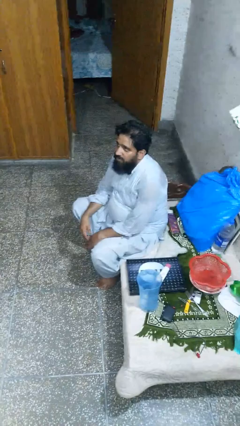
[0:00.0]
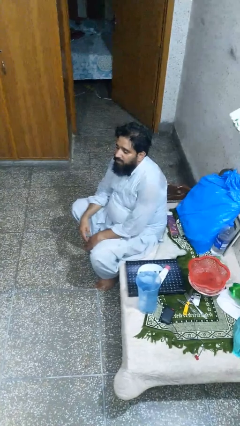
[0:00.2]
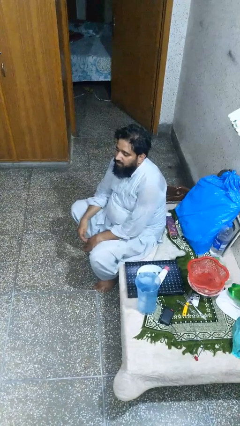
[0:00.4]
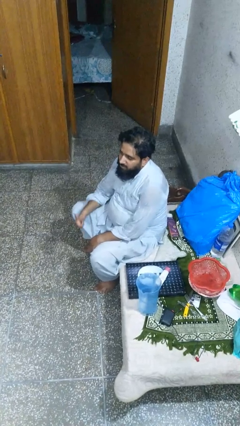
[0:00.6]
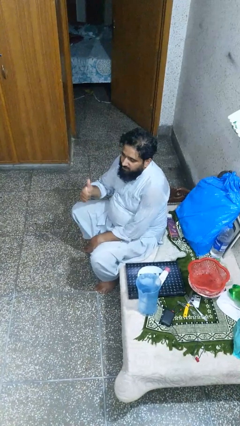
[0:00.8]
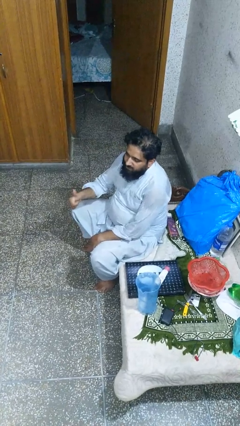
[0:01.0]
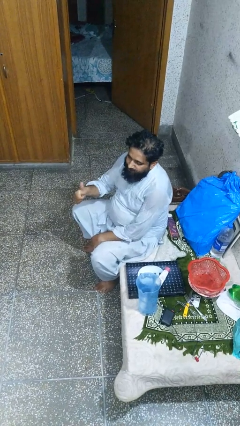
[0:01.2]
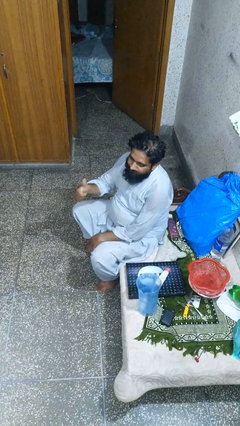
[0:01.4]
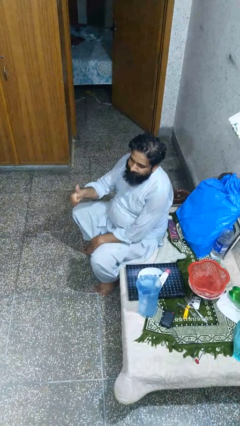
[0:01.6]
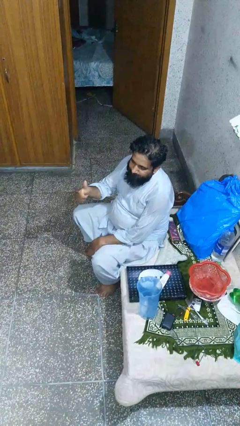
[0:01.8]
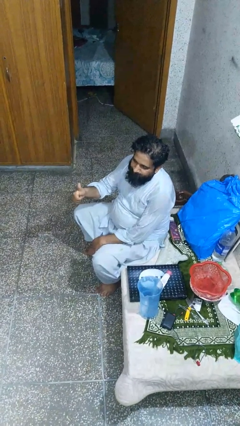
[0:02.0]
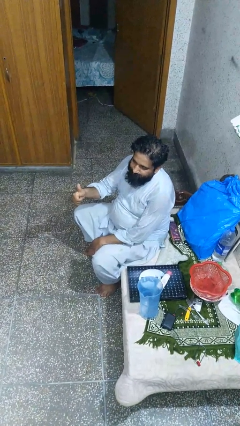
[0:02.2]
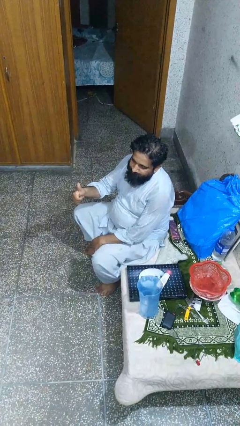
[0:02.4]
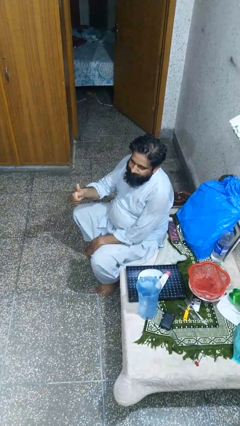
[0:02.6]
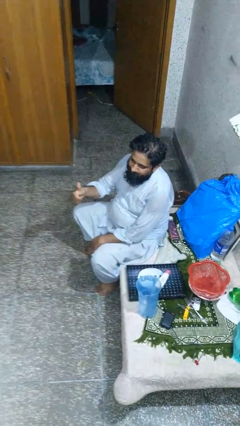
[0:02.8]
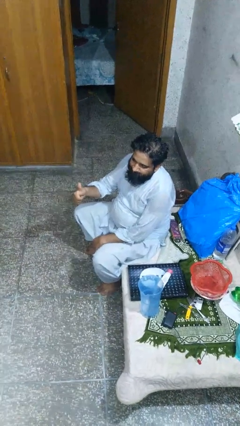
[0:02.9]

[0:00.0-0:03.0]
person gestures thumbs up

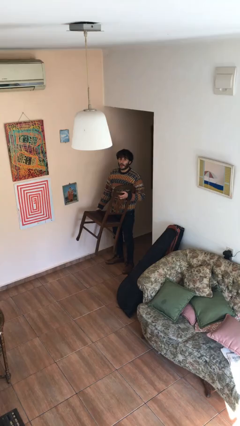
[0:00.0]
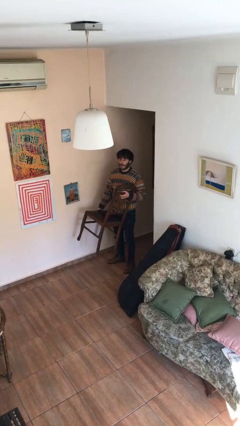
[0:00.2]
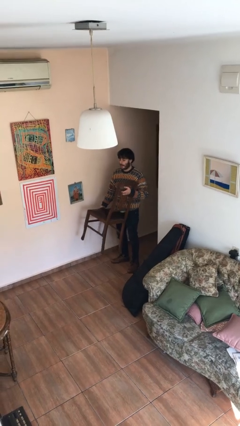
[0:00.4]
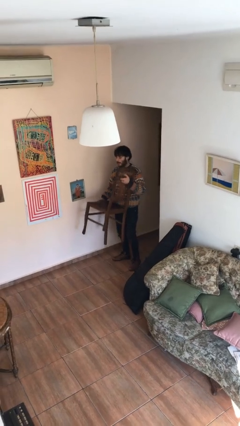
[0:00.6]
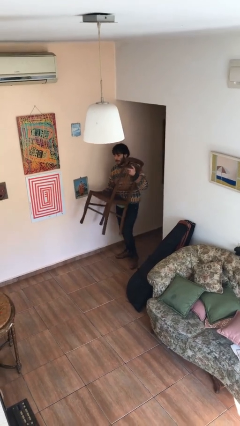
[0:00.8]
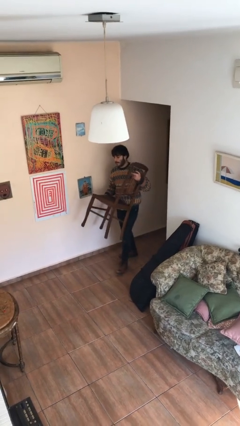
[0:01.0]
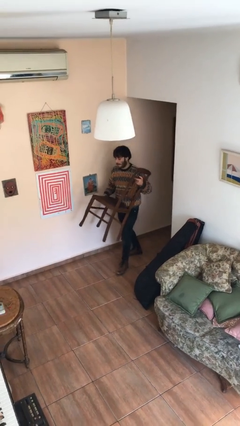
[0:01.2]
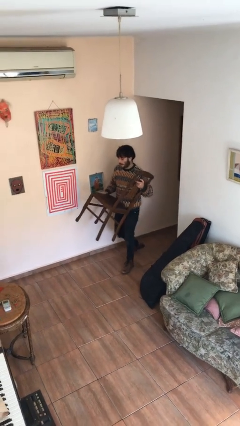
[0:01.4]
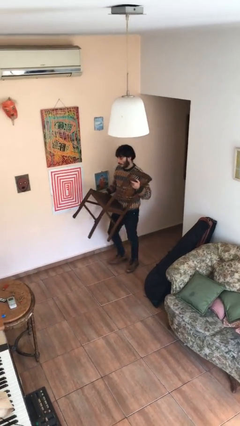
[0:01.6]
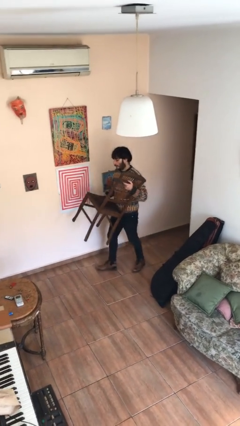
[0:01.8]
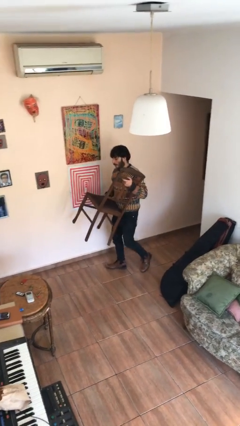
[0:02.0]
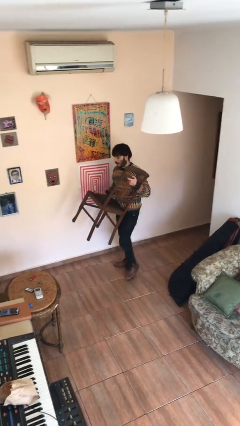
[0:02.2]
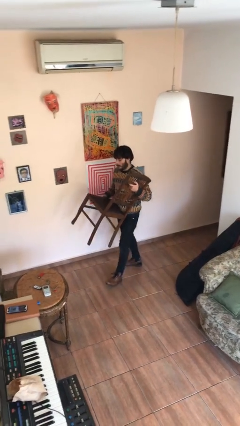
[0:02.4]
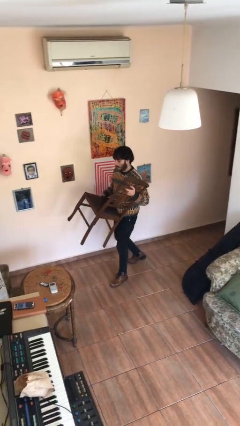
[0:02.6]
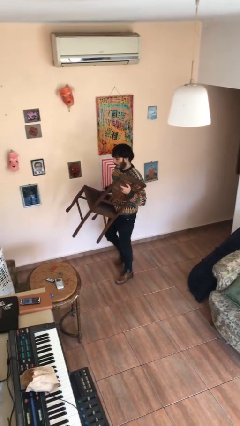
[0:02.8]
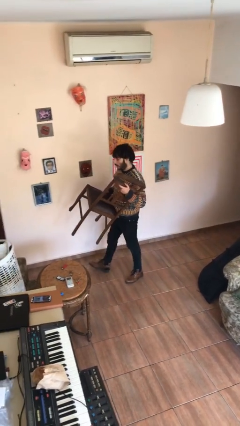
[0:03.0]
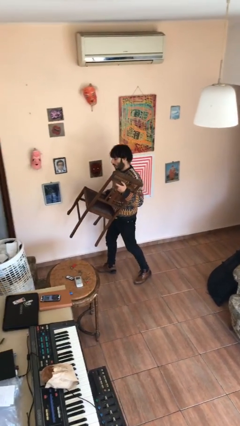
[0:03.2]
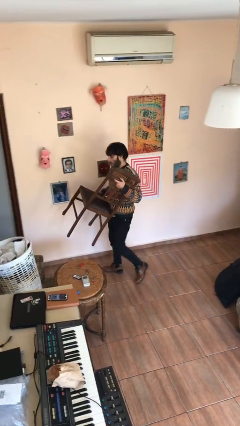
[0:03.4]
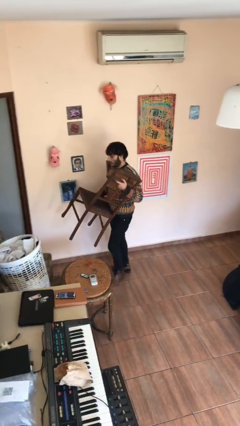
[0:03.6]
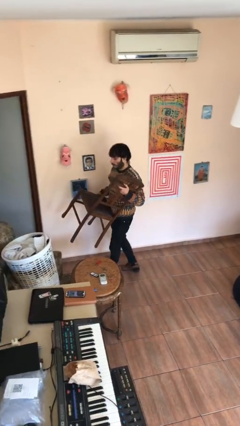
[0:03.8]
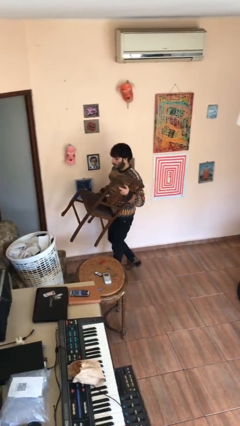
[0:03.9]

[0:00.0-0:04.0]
person carries furniture

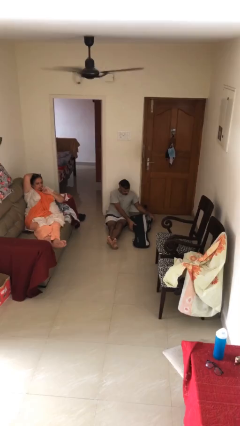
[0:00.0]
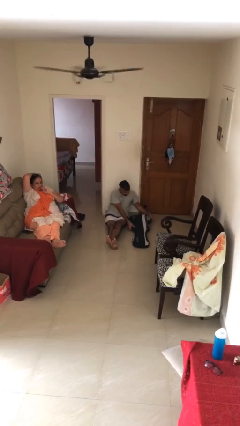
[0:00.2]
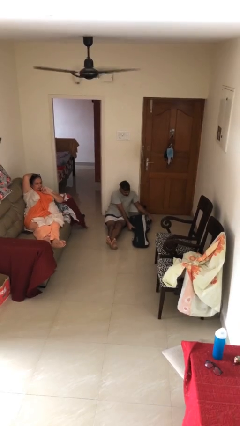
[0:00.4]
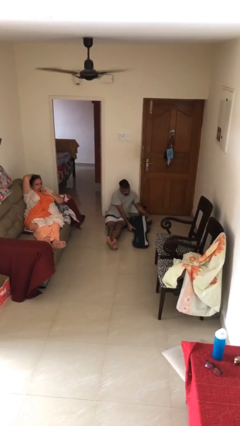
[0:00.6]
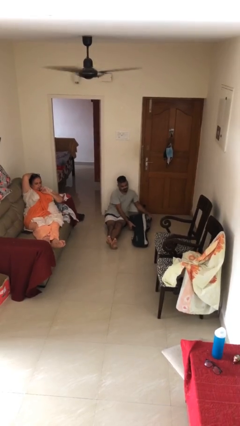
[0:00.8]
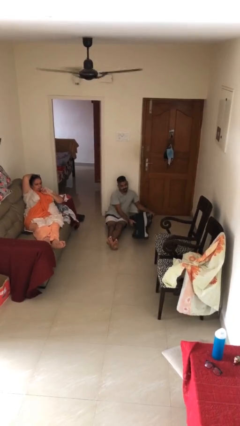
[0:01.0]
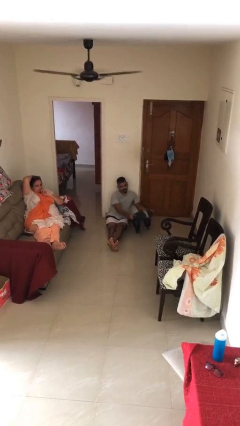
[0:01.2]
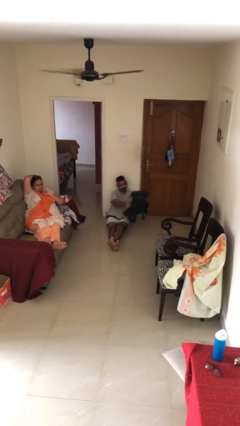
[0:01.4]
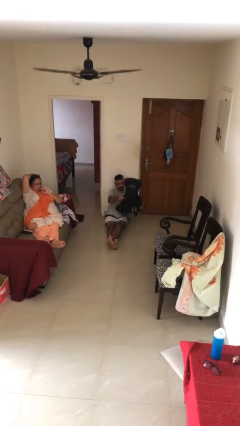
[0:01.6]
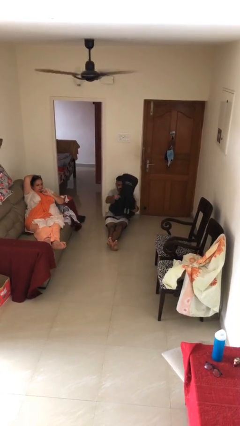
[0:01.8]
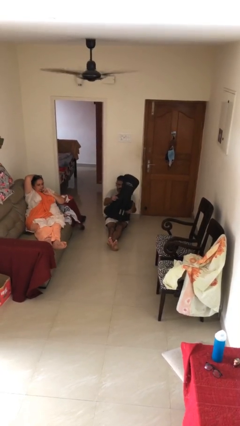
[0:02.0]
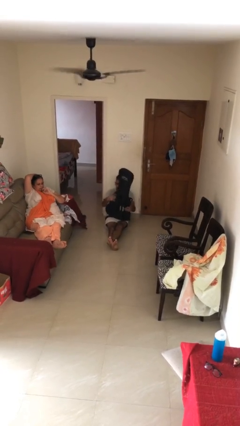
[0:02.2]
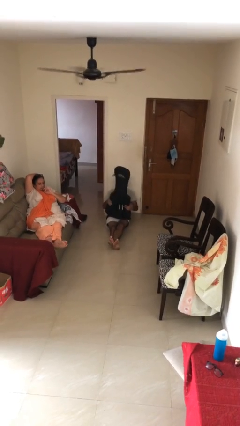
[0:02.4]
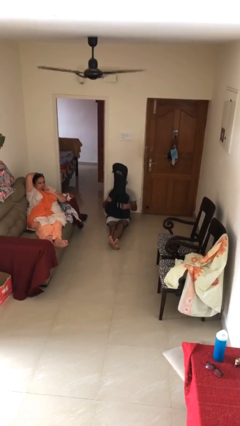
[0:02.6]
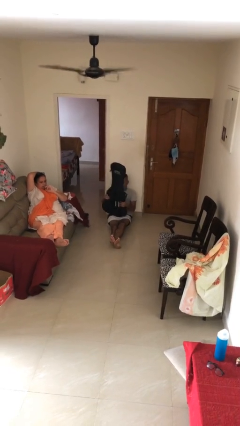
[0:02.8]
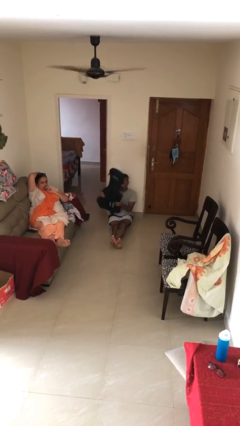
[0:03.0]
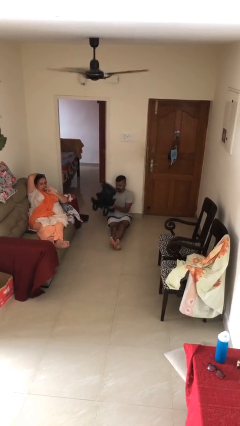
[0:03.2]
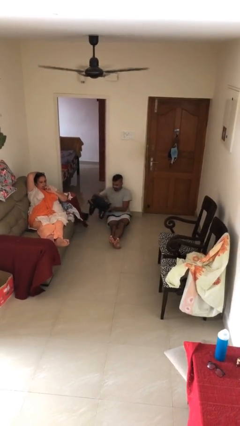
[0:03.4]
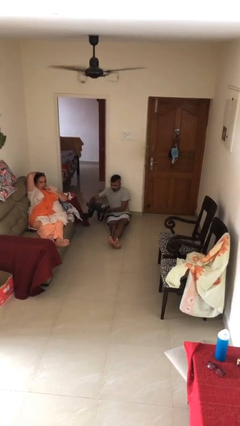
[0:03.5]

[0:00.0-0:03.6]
person picks up object from floor

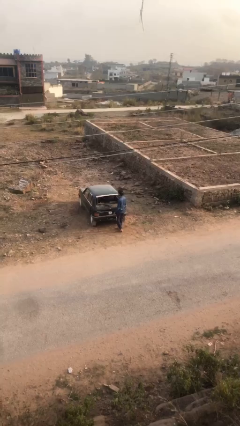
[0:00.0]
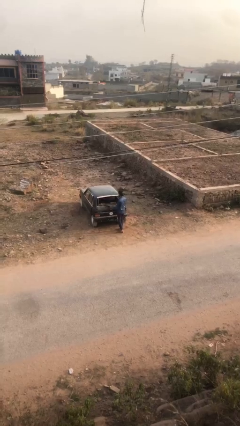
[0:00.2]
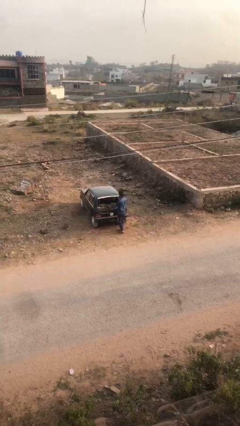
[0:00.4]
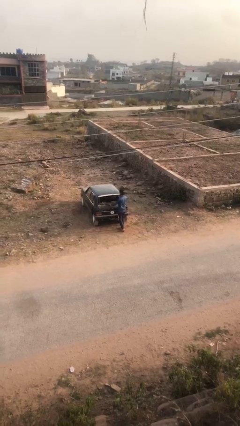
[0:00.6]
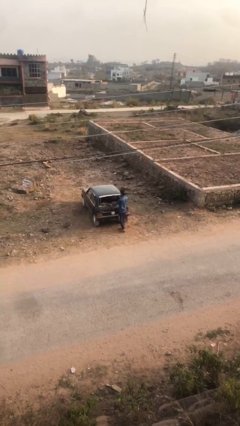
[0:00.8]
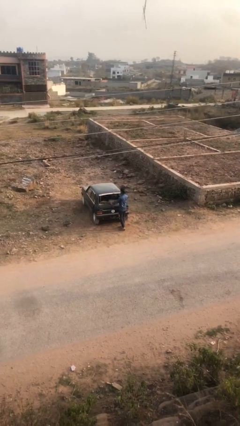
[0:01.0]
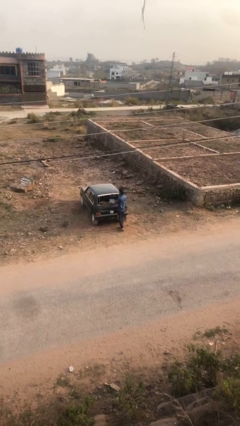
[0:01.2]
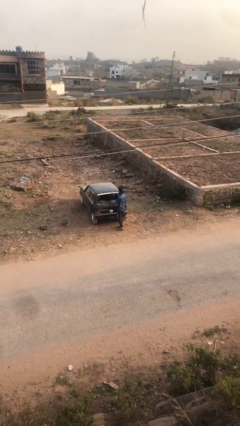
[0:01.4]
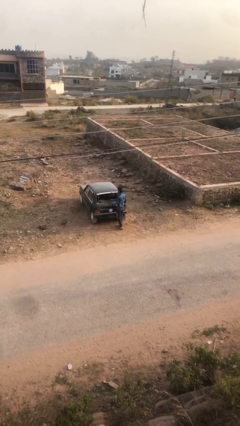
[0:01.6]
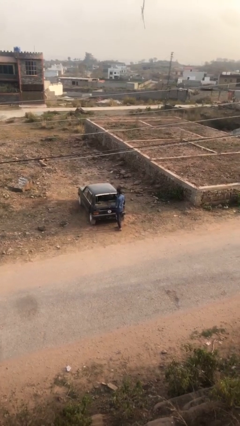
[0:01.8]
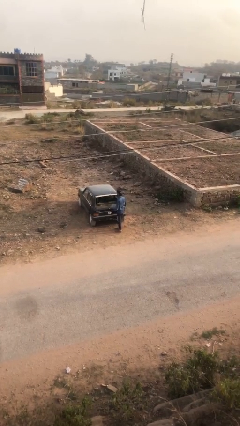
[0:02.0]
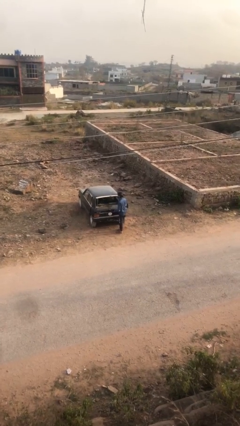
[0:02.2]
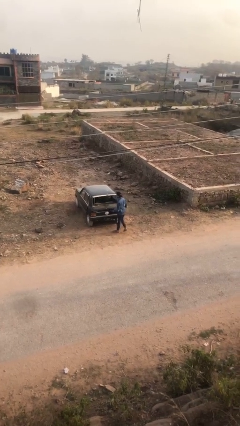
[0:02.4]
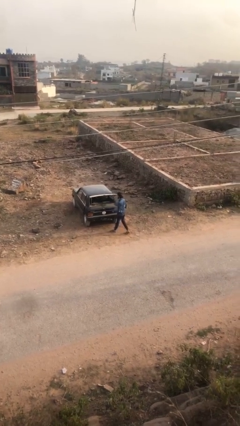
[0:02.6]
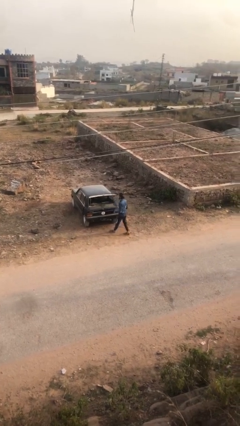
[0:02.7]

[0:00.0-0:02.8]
person unloads car

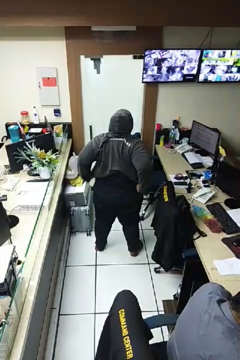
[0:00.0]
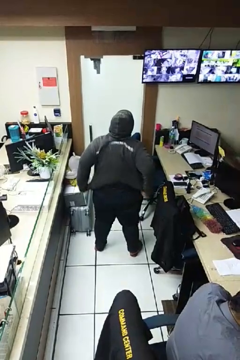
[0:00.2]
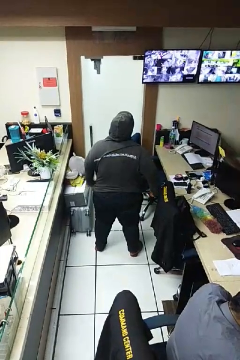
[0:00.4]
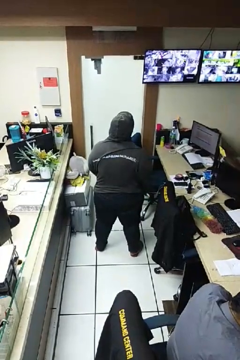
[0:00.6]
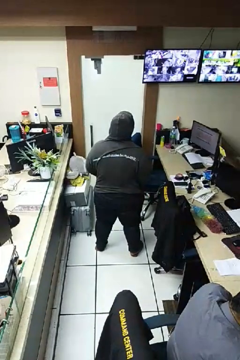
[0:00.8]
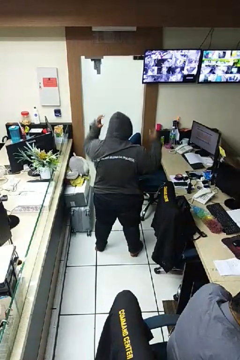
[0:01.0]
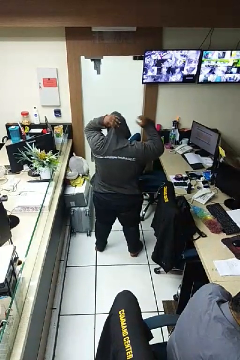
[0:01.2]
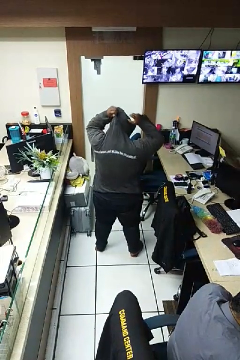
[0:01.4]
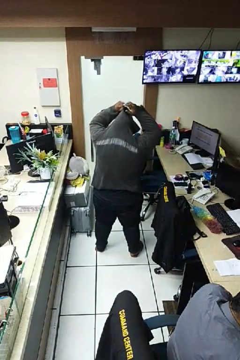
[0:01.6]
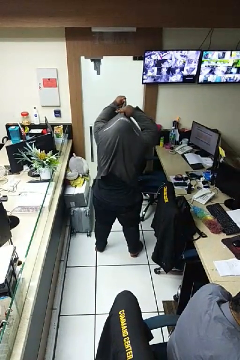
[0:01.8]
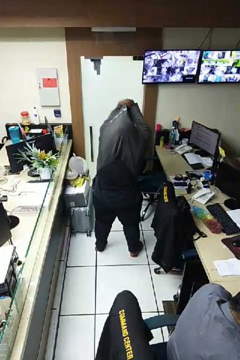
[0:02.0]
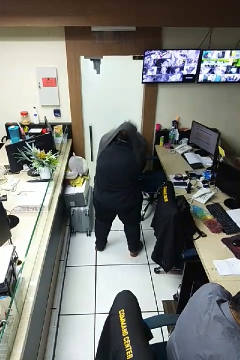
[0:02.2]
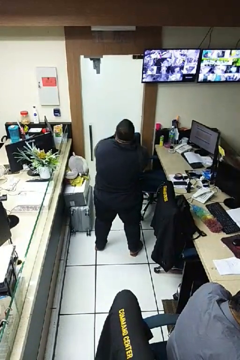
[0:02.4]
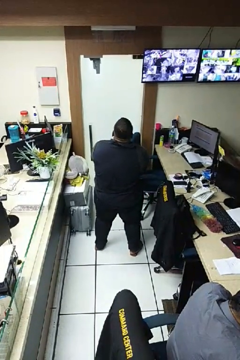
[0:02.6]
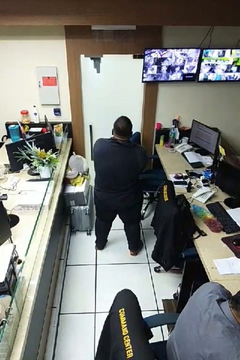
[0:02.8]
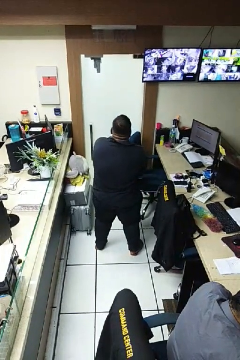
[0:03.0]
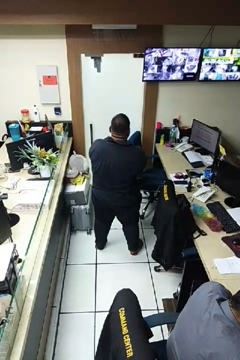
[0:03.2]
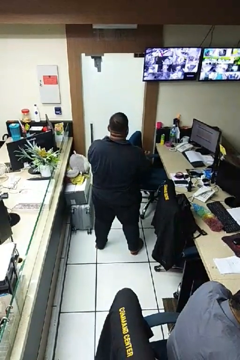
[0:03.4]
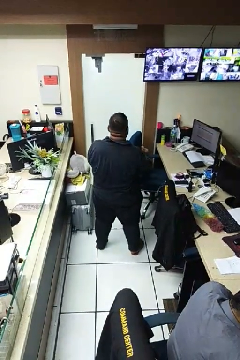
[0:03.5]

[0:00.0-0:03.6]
person takes off hoodie

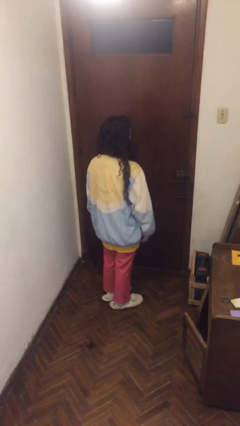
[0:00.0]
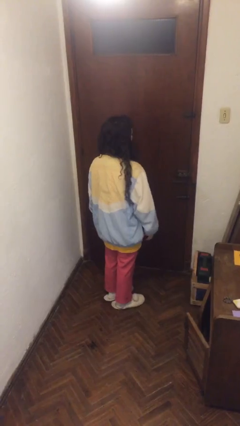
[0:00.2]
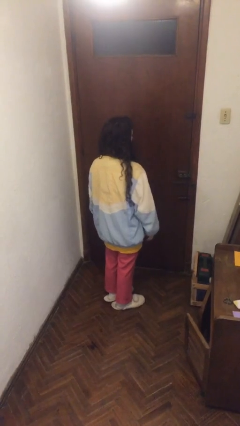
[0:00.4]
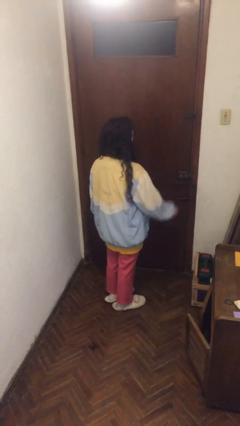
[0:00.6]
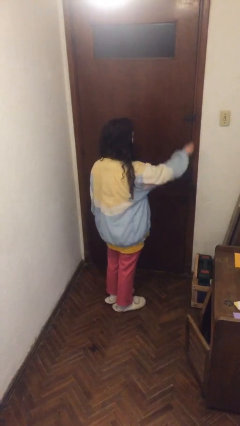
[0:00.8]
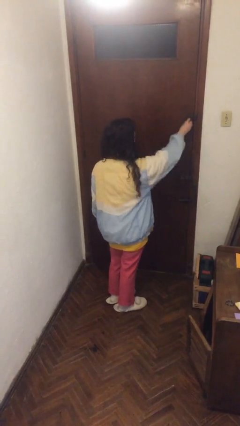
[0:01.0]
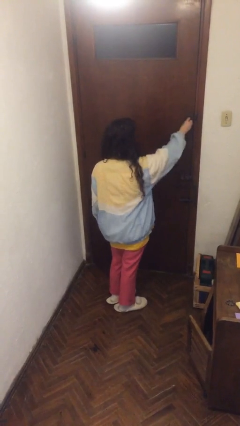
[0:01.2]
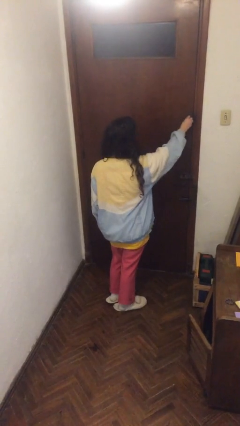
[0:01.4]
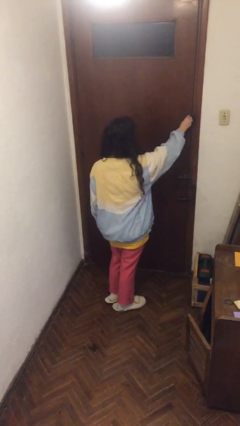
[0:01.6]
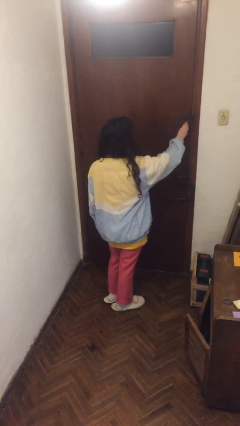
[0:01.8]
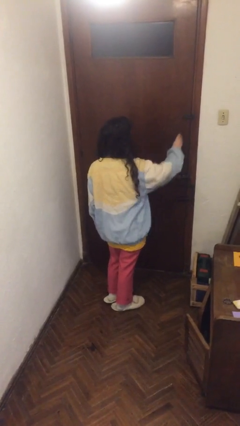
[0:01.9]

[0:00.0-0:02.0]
person locks door with keys
